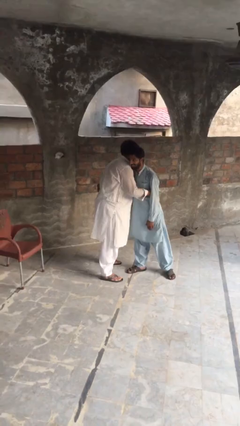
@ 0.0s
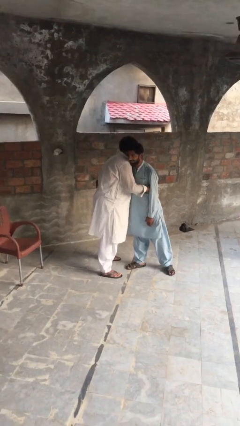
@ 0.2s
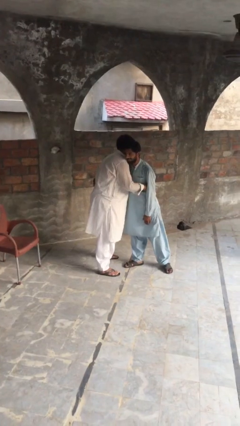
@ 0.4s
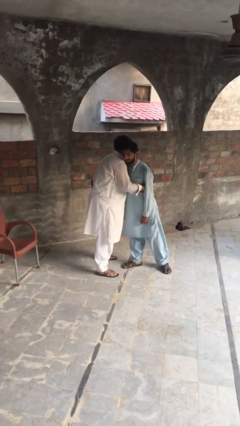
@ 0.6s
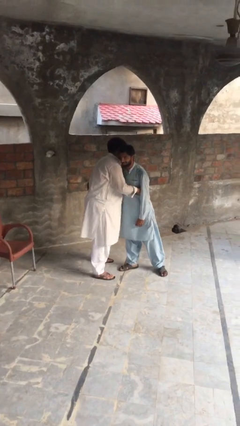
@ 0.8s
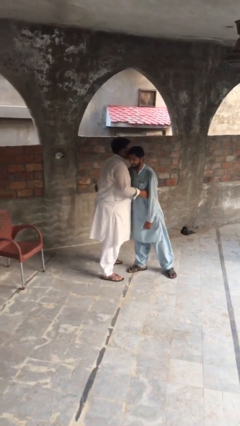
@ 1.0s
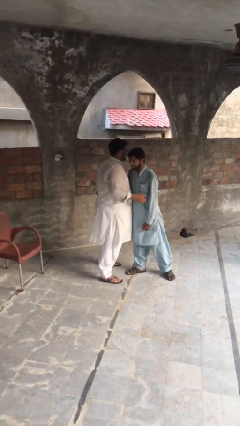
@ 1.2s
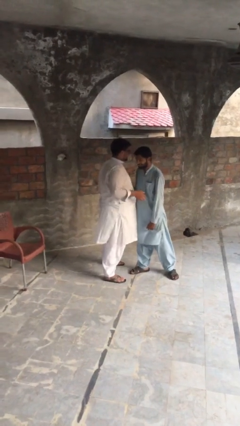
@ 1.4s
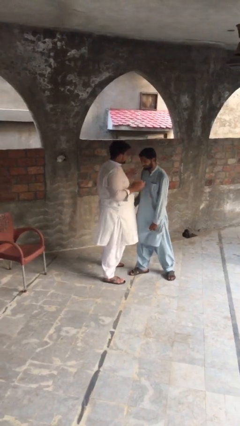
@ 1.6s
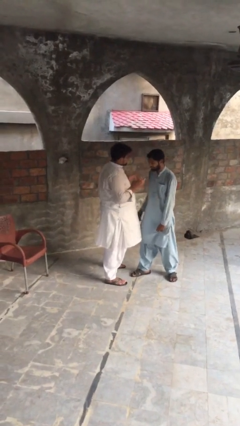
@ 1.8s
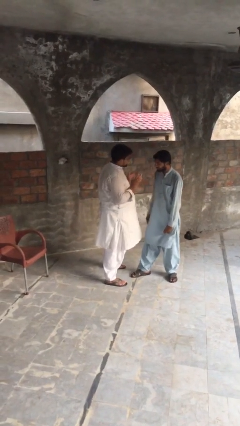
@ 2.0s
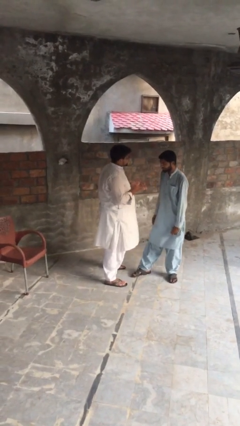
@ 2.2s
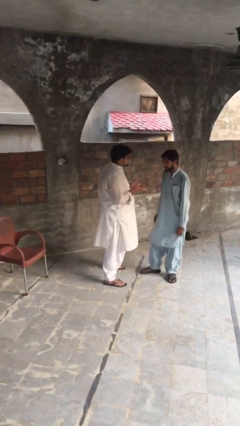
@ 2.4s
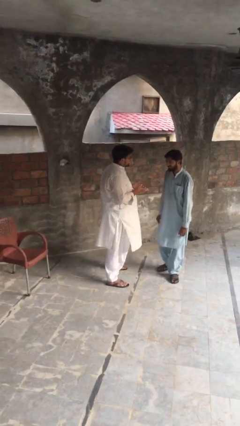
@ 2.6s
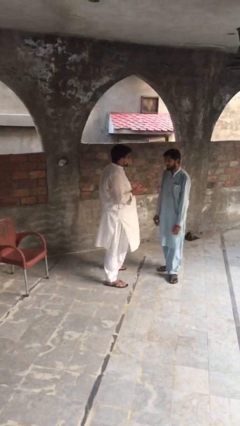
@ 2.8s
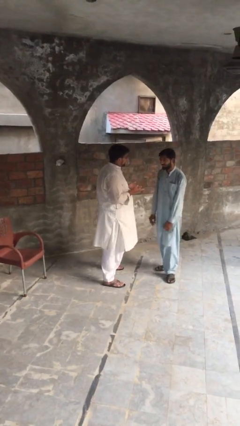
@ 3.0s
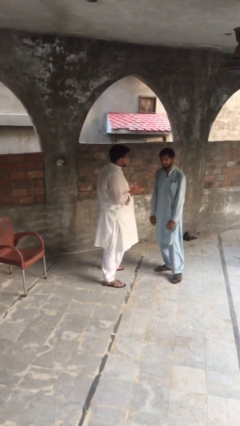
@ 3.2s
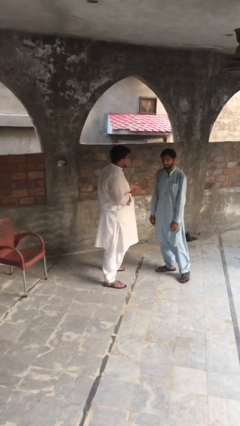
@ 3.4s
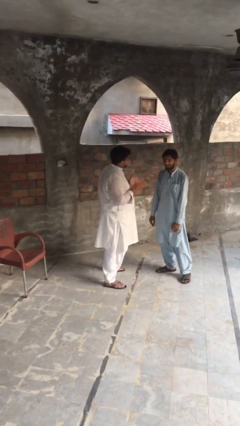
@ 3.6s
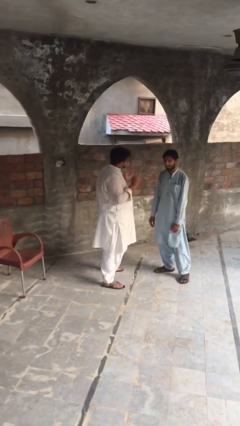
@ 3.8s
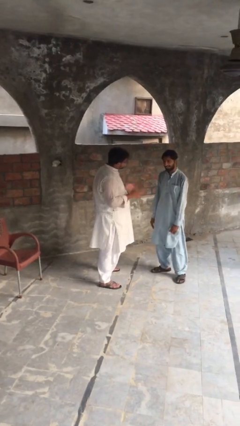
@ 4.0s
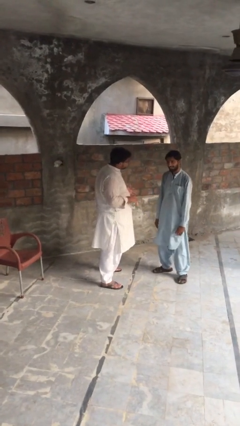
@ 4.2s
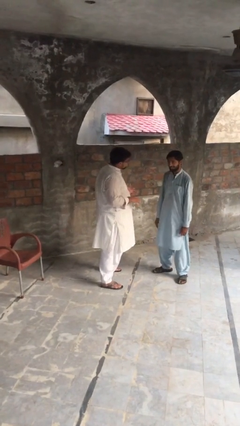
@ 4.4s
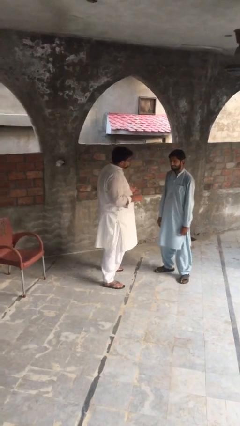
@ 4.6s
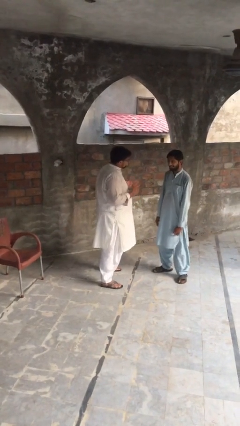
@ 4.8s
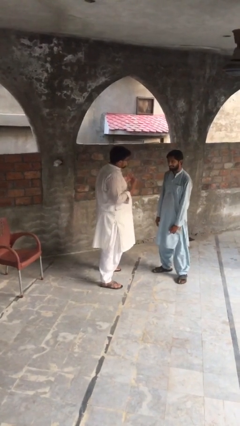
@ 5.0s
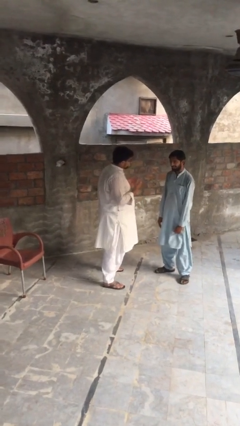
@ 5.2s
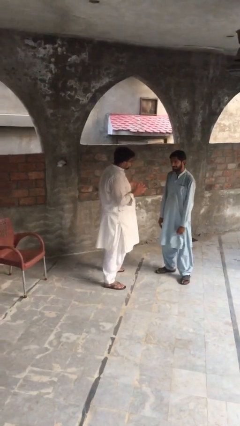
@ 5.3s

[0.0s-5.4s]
person talks to person

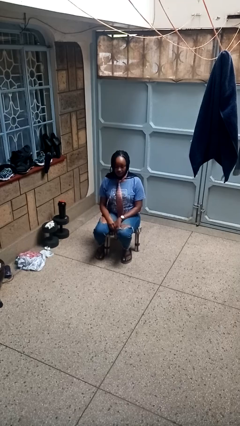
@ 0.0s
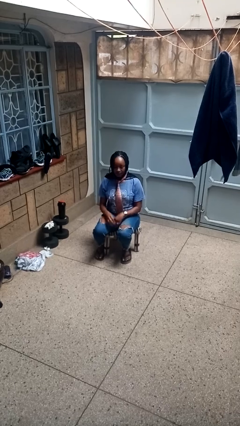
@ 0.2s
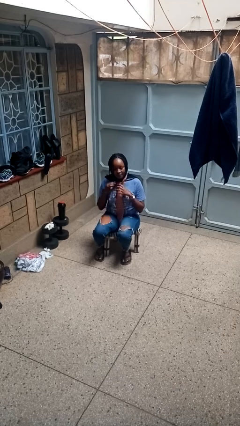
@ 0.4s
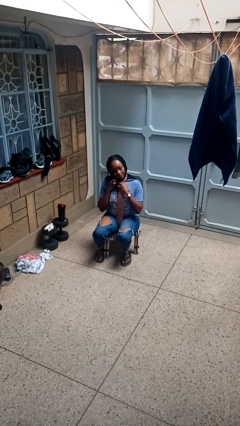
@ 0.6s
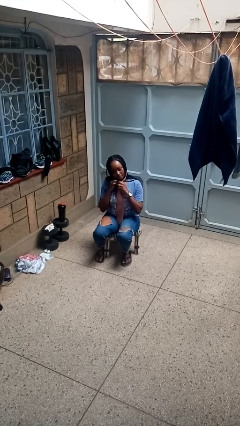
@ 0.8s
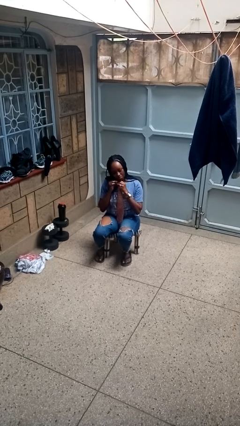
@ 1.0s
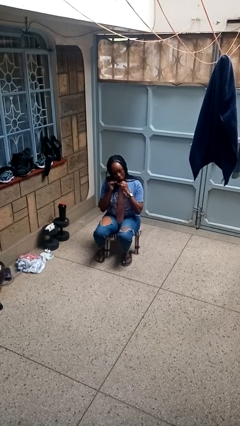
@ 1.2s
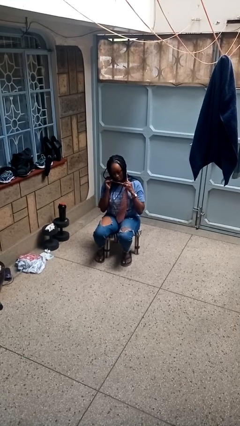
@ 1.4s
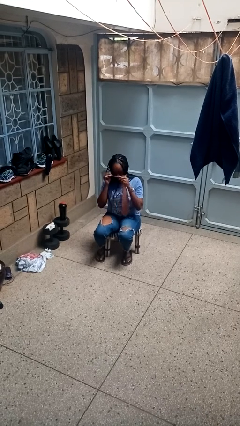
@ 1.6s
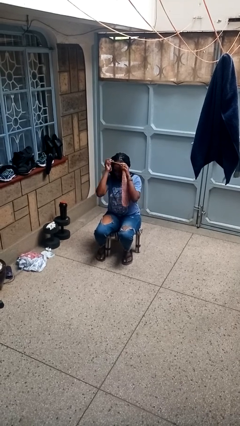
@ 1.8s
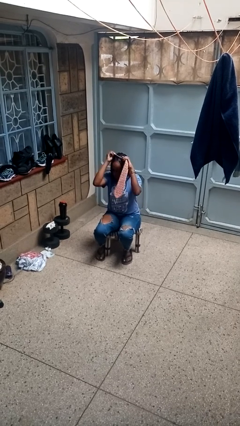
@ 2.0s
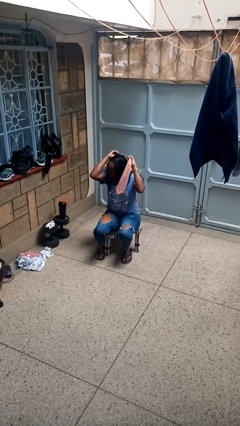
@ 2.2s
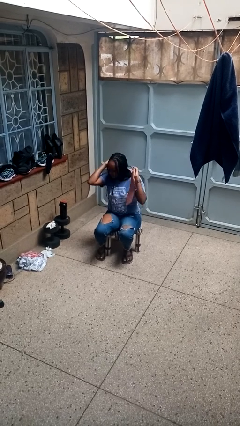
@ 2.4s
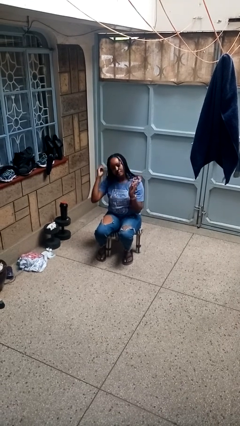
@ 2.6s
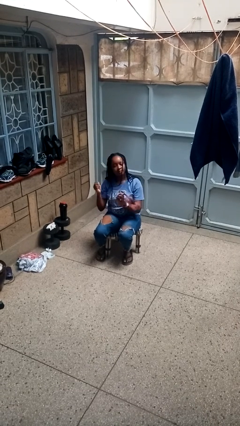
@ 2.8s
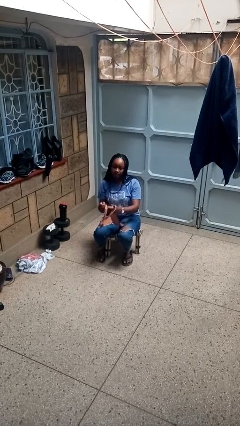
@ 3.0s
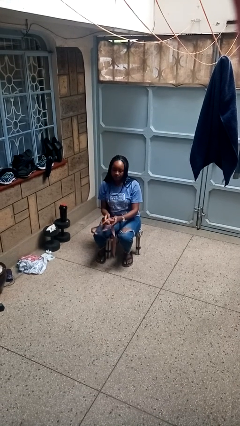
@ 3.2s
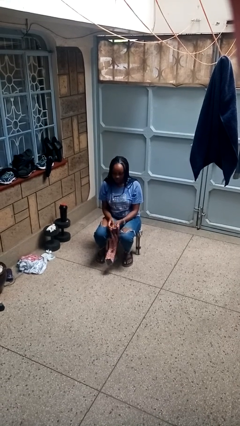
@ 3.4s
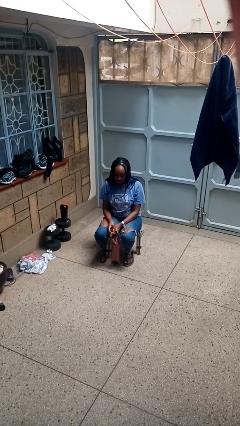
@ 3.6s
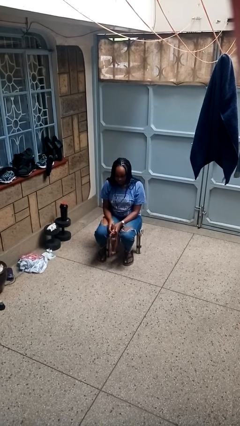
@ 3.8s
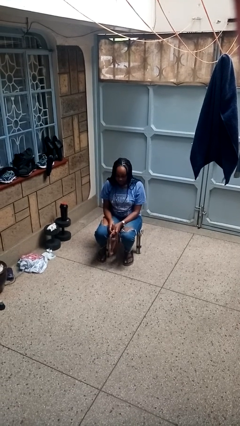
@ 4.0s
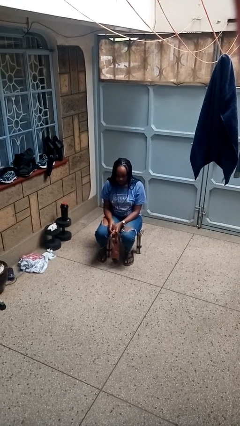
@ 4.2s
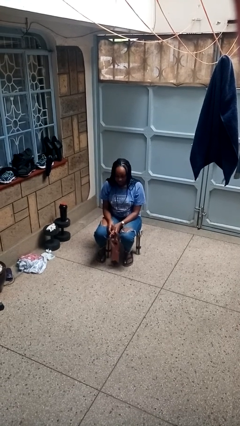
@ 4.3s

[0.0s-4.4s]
person takes off necktie

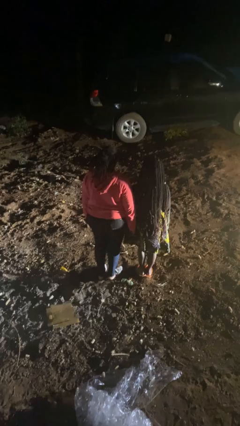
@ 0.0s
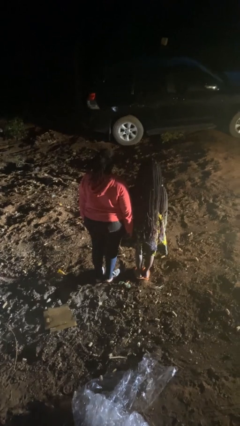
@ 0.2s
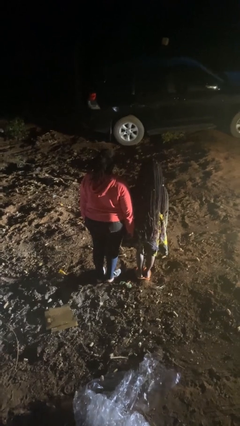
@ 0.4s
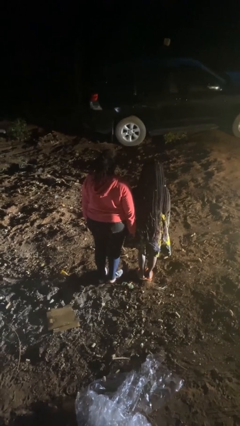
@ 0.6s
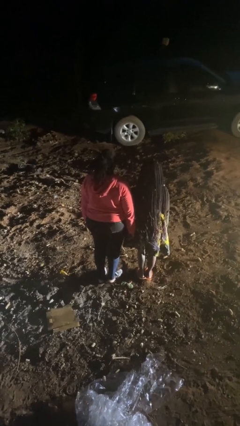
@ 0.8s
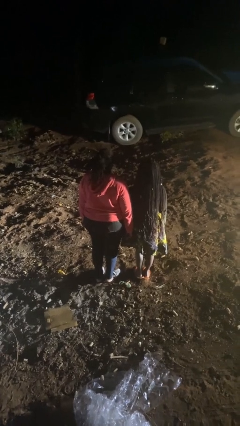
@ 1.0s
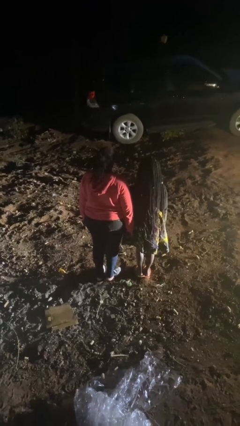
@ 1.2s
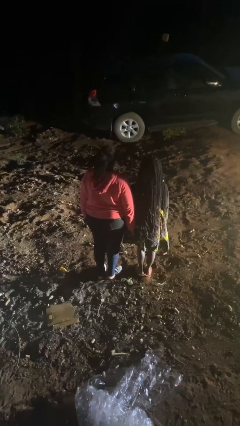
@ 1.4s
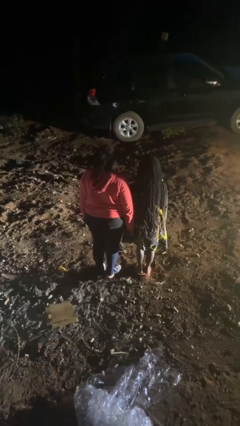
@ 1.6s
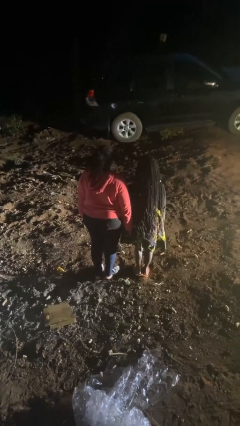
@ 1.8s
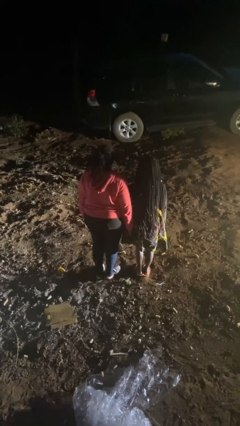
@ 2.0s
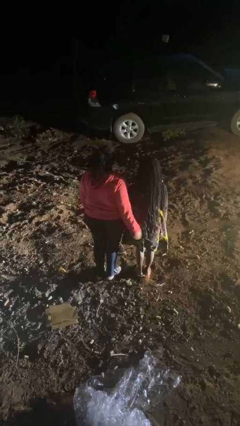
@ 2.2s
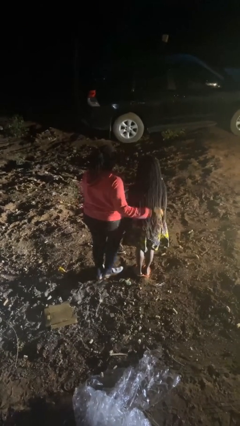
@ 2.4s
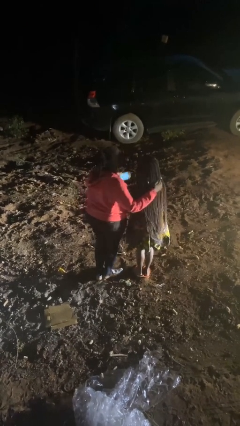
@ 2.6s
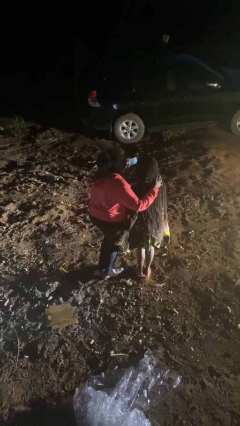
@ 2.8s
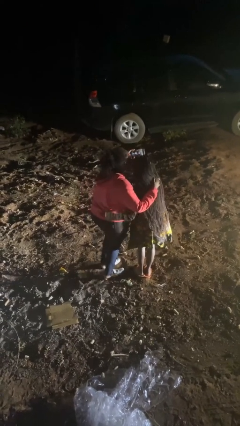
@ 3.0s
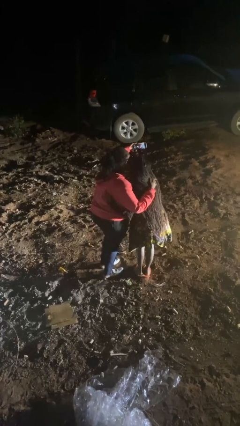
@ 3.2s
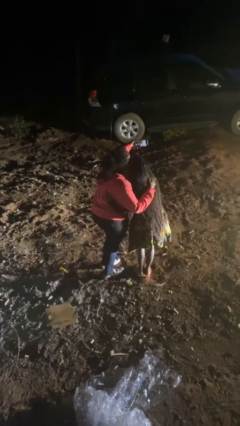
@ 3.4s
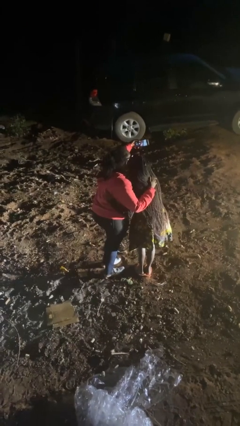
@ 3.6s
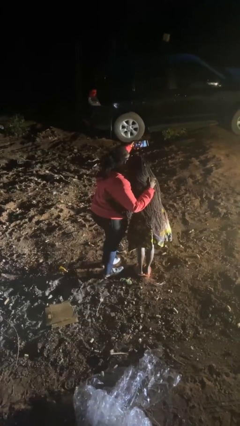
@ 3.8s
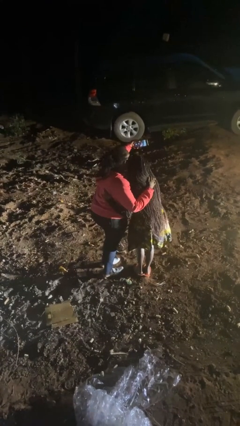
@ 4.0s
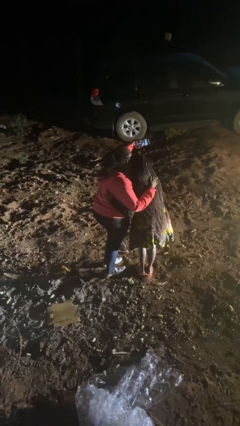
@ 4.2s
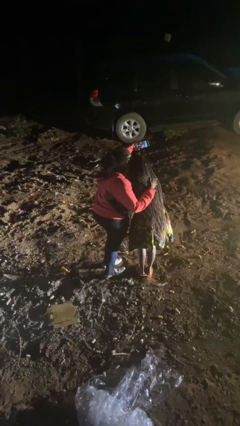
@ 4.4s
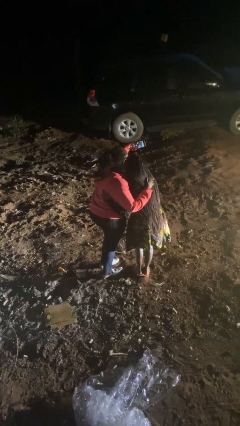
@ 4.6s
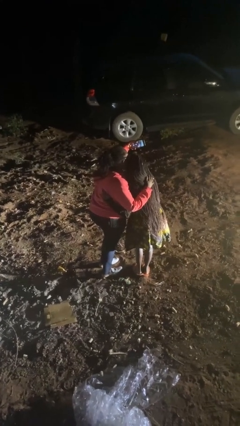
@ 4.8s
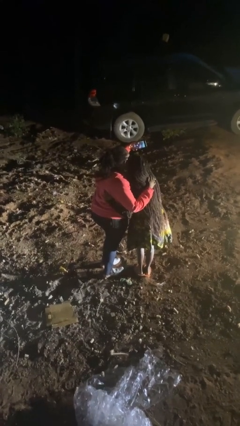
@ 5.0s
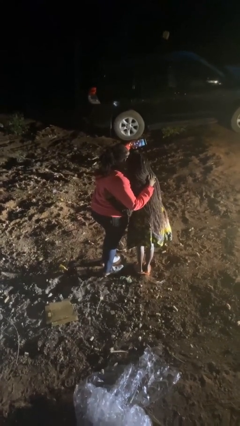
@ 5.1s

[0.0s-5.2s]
person takes selfie with person

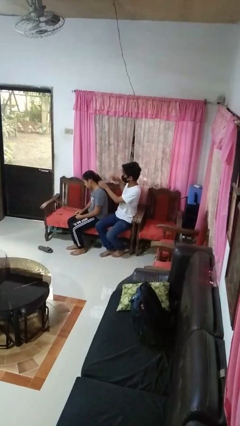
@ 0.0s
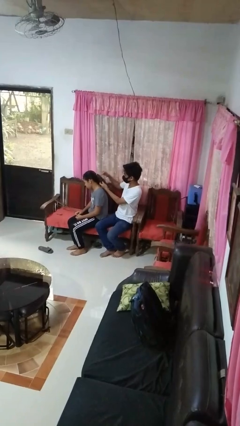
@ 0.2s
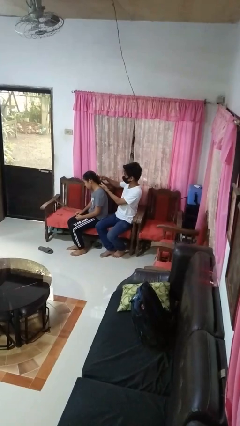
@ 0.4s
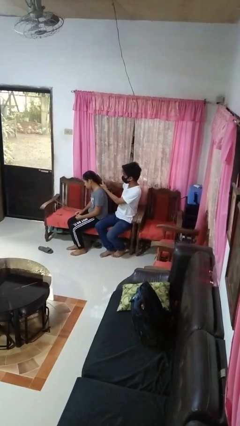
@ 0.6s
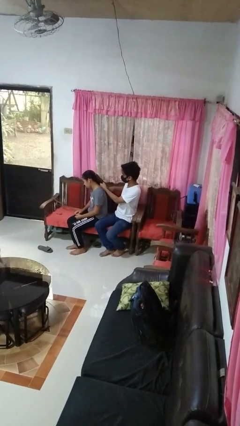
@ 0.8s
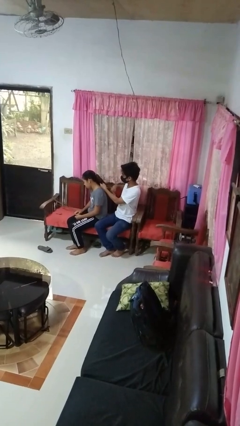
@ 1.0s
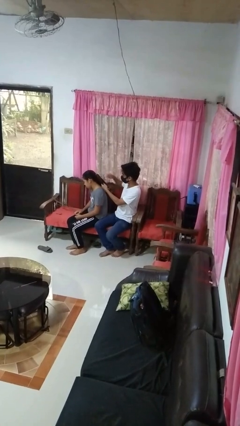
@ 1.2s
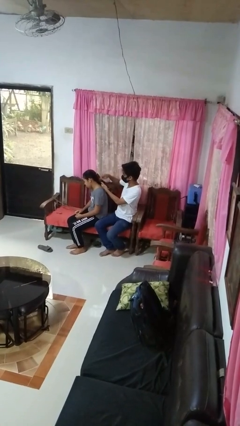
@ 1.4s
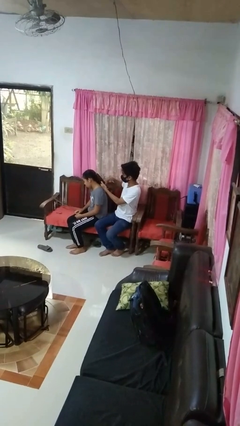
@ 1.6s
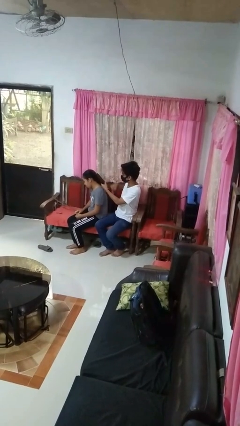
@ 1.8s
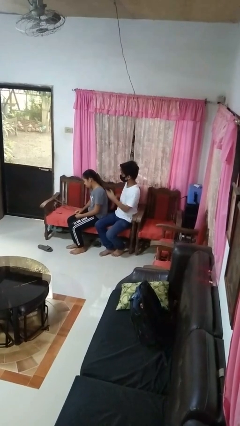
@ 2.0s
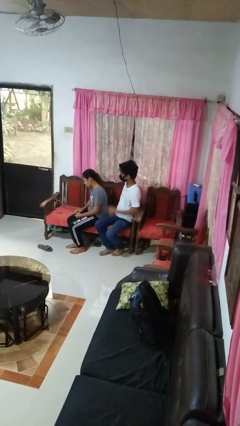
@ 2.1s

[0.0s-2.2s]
person brushes hair of person
